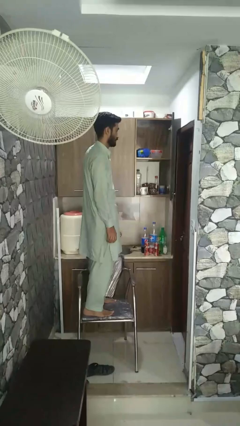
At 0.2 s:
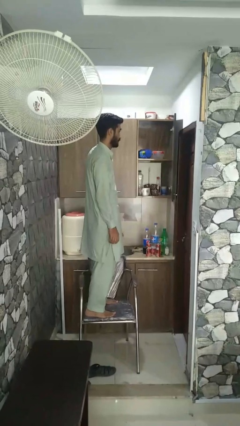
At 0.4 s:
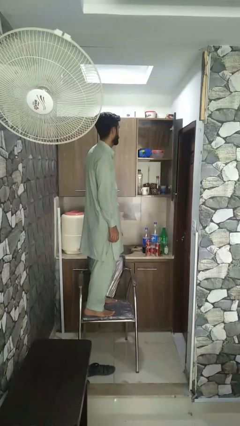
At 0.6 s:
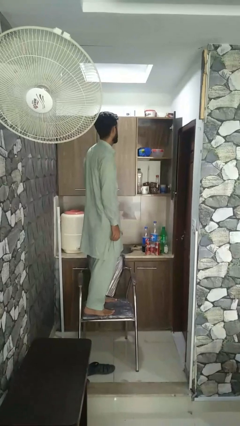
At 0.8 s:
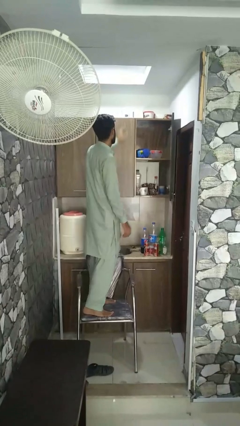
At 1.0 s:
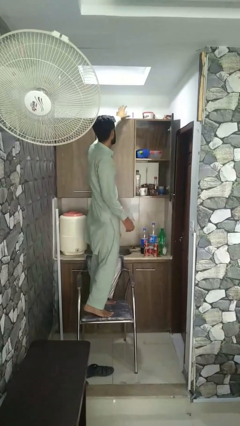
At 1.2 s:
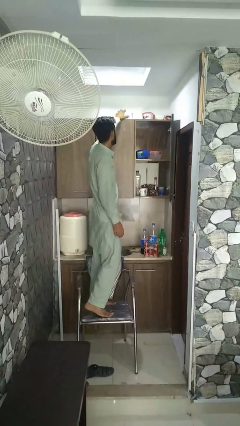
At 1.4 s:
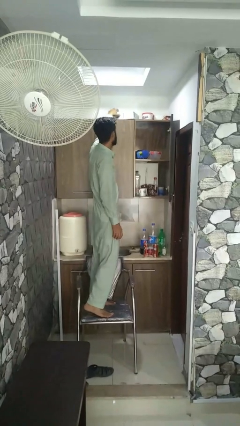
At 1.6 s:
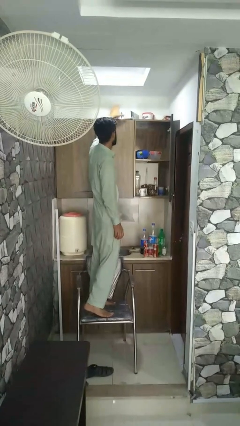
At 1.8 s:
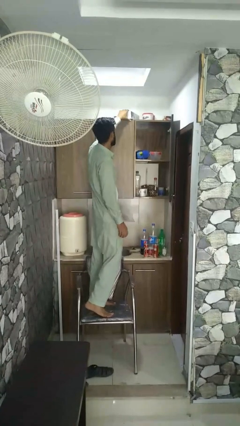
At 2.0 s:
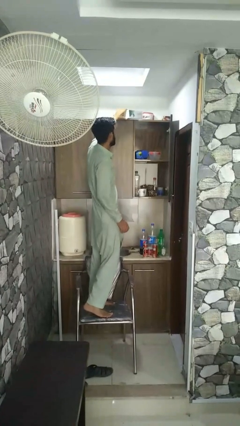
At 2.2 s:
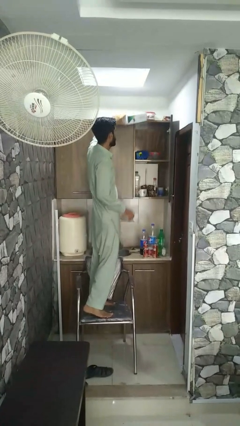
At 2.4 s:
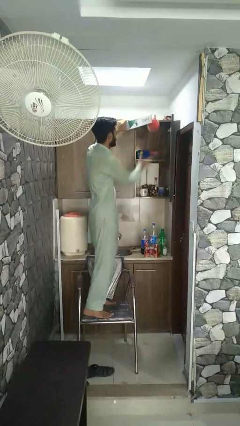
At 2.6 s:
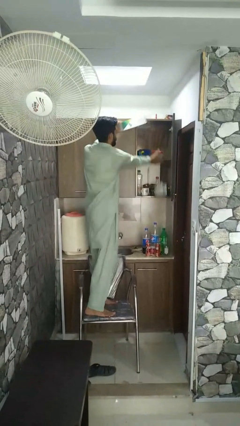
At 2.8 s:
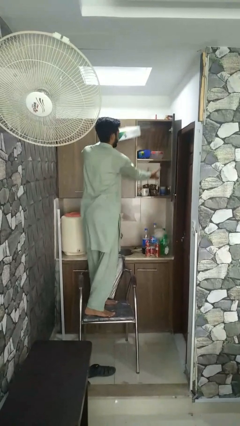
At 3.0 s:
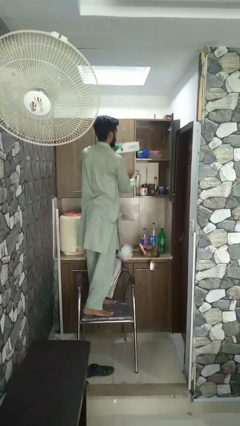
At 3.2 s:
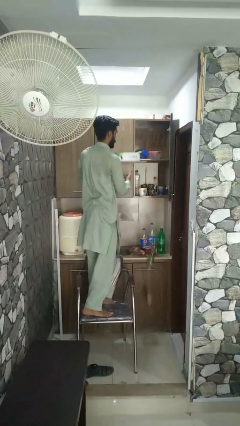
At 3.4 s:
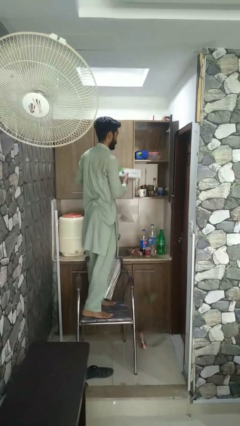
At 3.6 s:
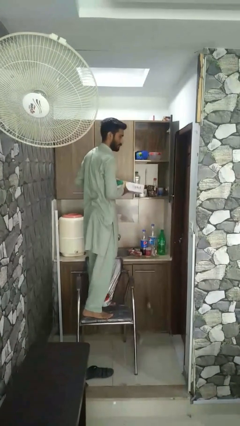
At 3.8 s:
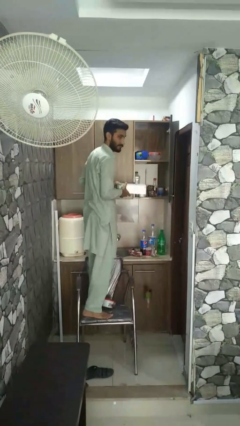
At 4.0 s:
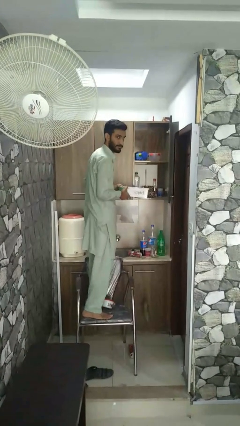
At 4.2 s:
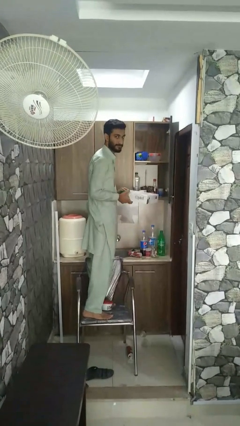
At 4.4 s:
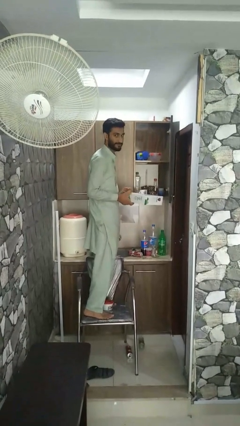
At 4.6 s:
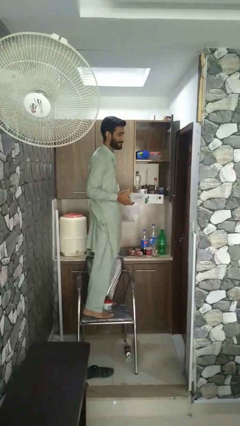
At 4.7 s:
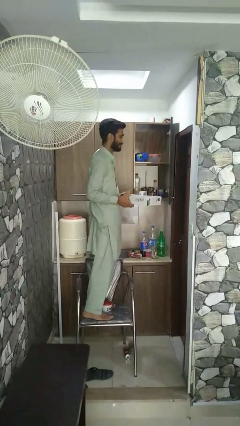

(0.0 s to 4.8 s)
person picks up object from shelf

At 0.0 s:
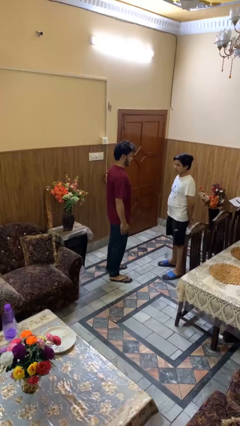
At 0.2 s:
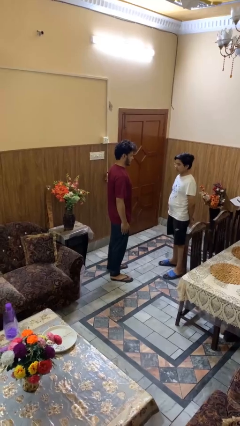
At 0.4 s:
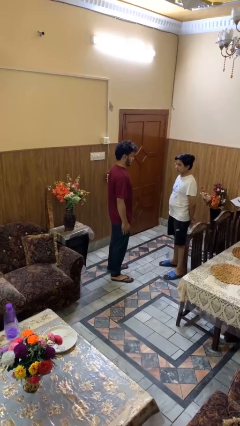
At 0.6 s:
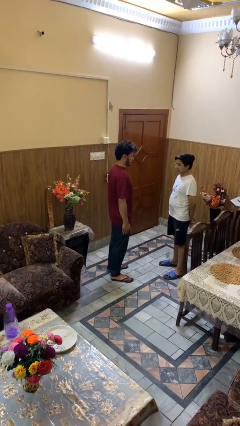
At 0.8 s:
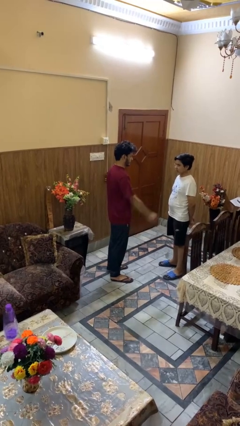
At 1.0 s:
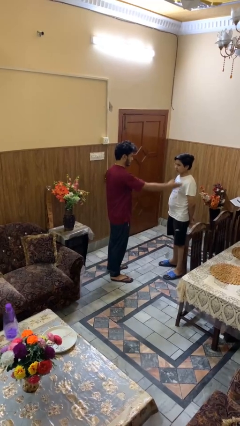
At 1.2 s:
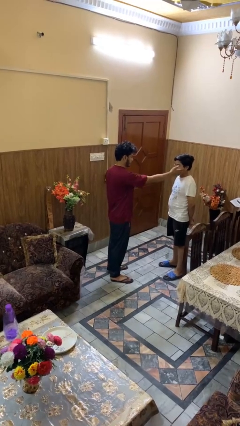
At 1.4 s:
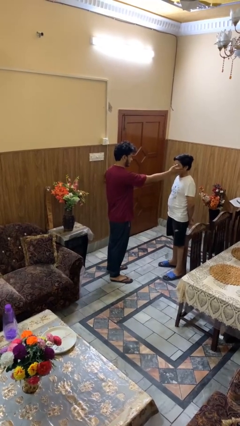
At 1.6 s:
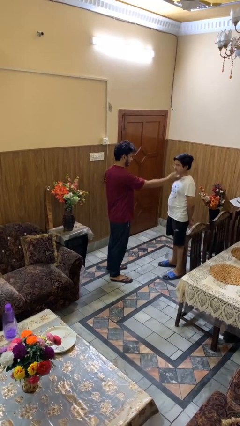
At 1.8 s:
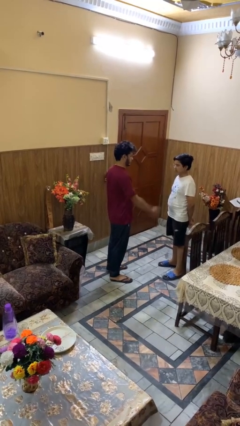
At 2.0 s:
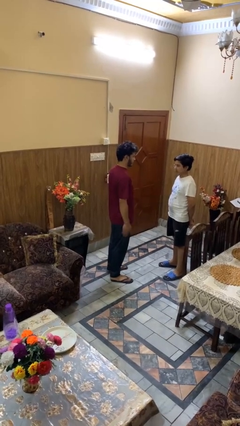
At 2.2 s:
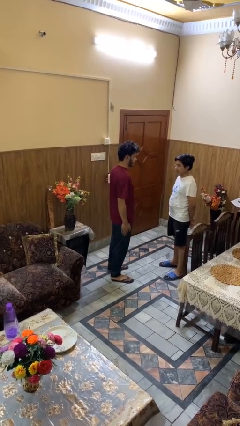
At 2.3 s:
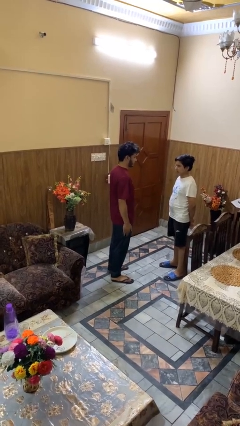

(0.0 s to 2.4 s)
person touches face of person

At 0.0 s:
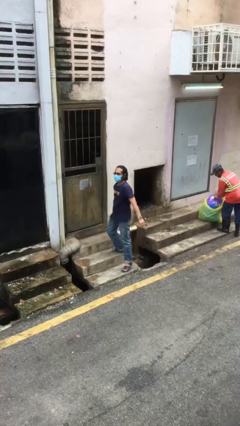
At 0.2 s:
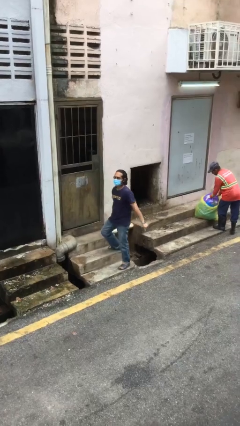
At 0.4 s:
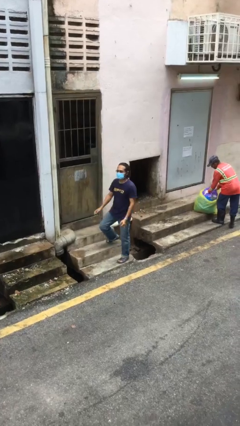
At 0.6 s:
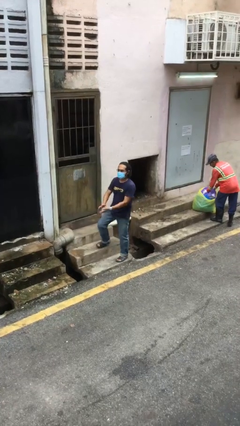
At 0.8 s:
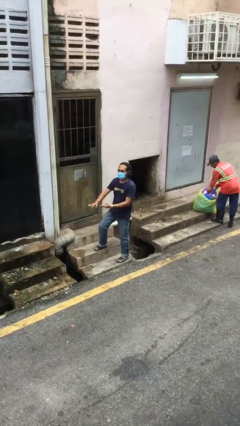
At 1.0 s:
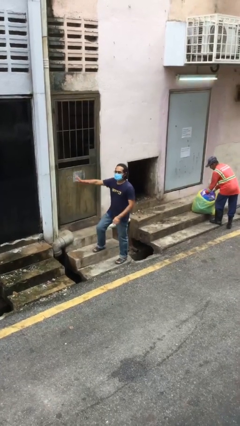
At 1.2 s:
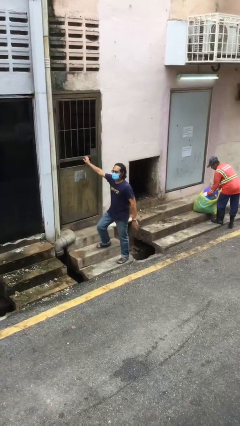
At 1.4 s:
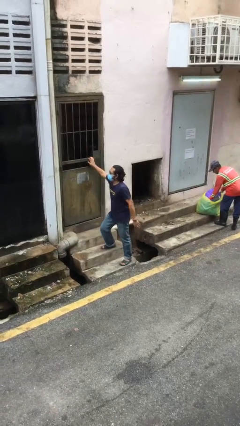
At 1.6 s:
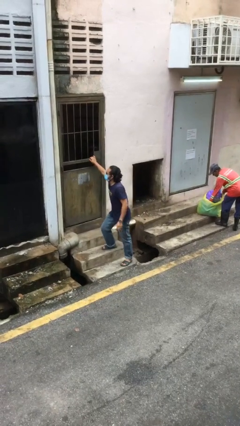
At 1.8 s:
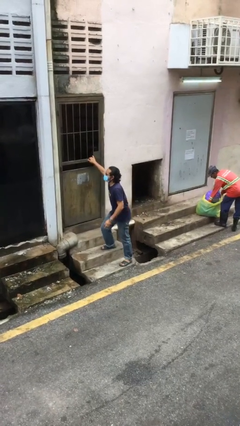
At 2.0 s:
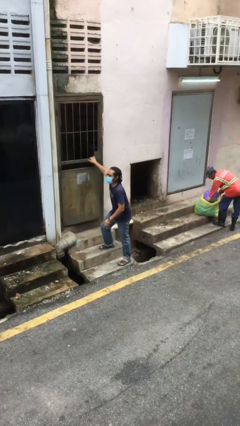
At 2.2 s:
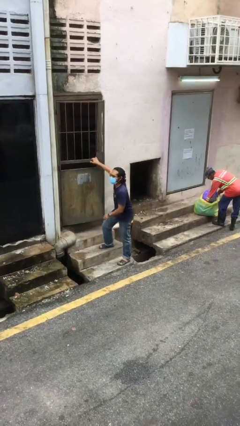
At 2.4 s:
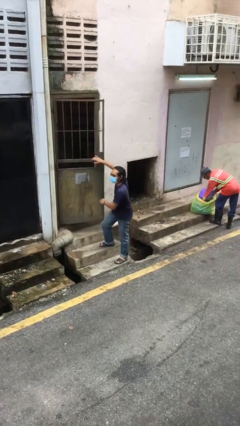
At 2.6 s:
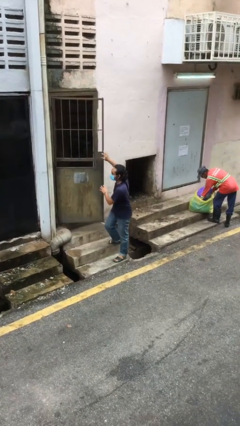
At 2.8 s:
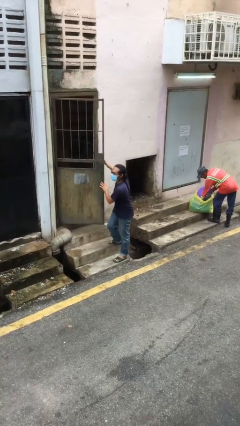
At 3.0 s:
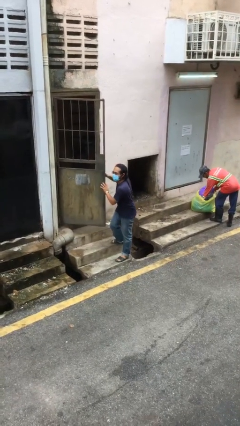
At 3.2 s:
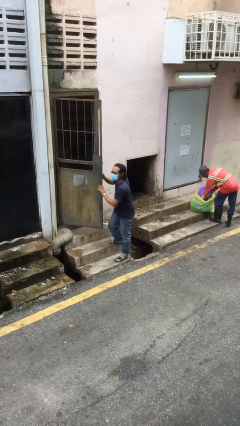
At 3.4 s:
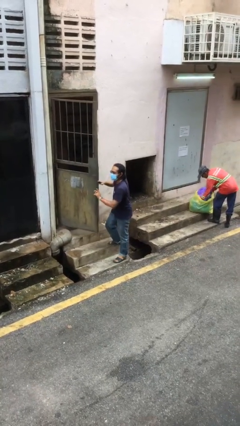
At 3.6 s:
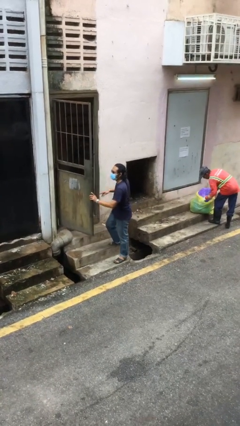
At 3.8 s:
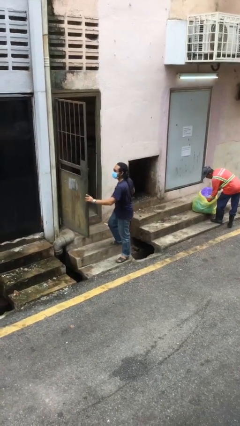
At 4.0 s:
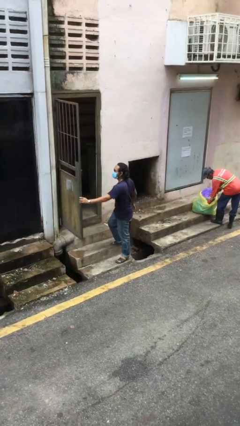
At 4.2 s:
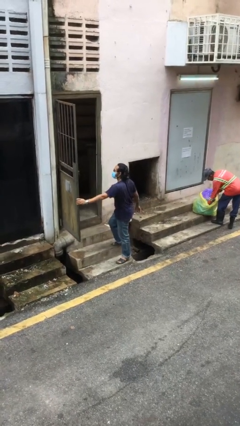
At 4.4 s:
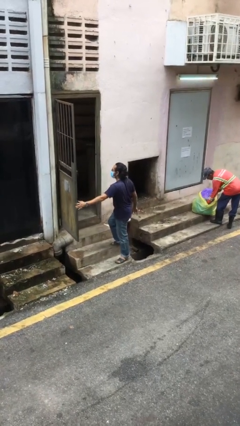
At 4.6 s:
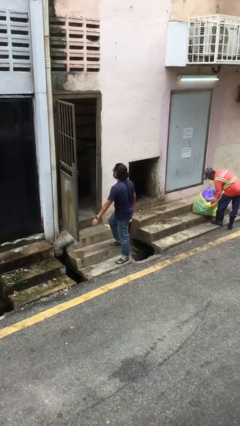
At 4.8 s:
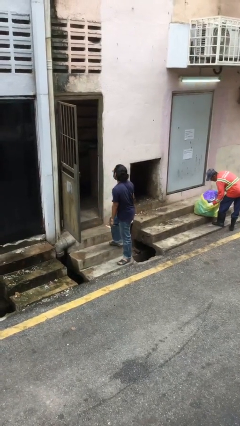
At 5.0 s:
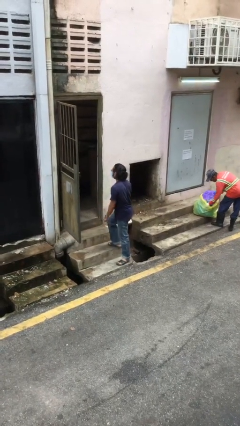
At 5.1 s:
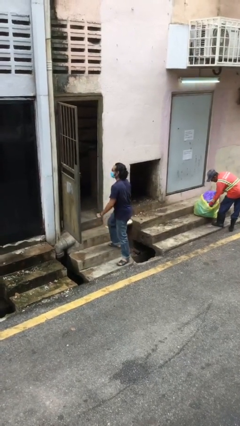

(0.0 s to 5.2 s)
person opens facility door

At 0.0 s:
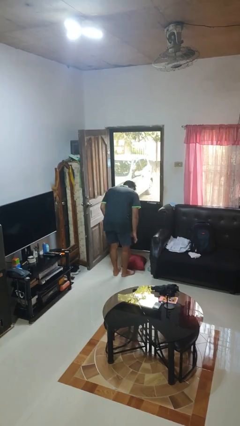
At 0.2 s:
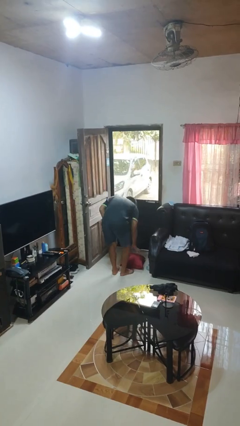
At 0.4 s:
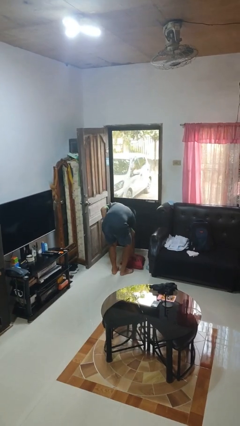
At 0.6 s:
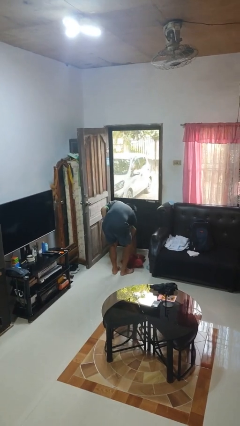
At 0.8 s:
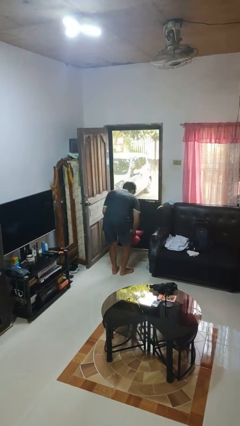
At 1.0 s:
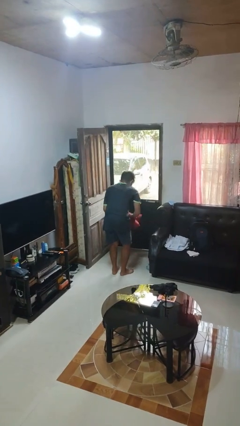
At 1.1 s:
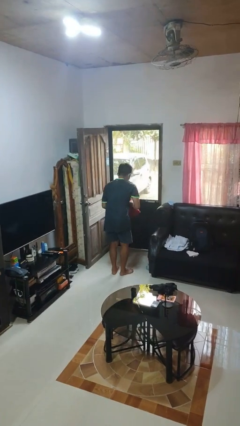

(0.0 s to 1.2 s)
person picks up object from floor

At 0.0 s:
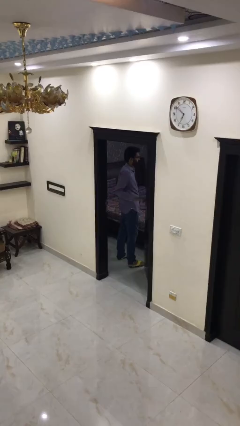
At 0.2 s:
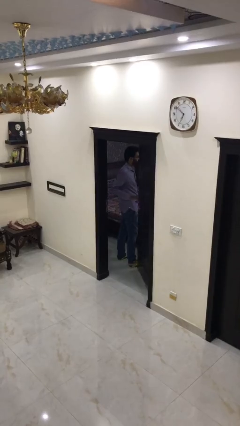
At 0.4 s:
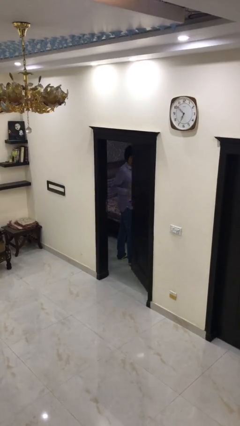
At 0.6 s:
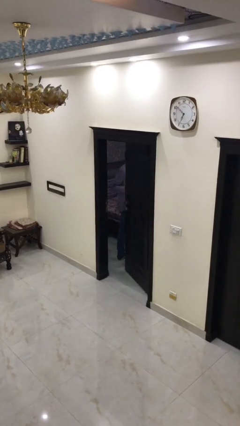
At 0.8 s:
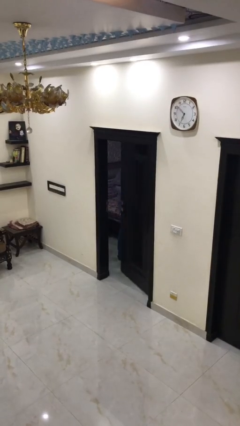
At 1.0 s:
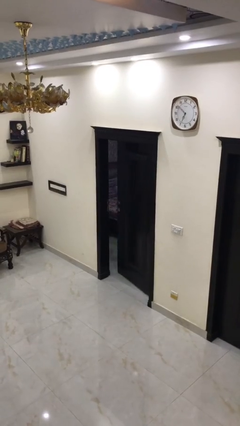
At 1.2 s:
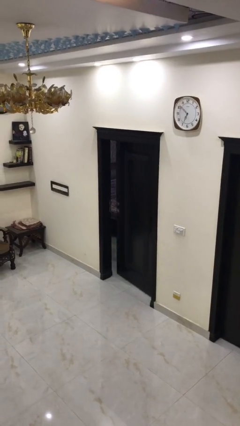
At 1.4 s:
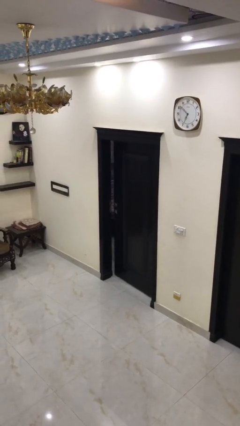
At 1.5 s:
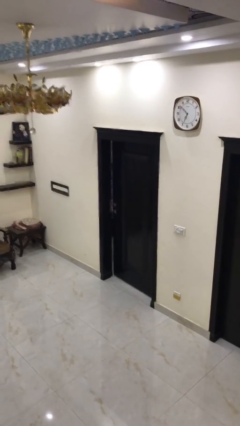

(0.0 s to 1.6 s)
person closes facility door

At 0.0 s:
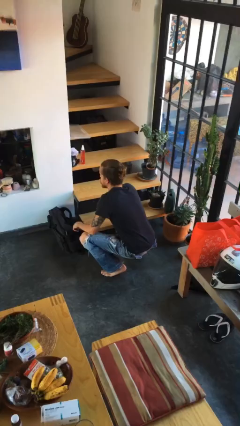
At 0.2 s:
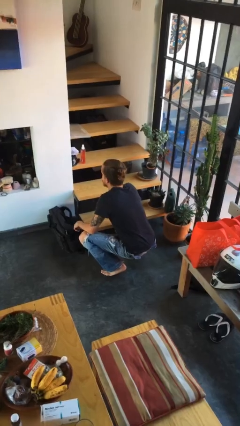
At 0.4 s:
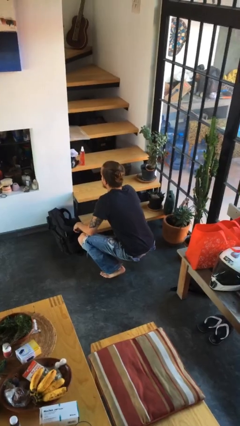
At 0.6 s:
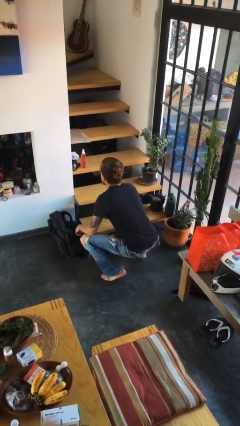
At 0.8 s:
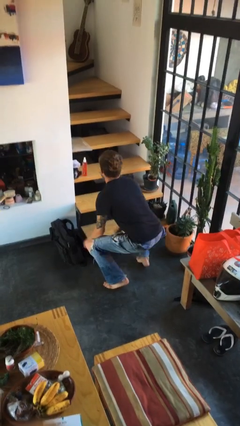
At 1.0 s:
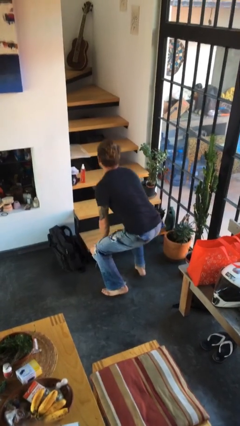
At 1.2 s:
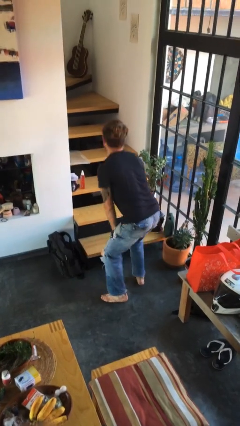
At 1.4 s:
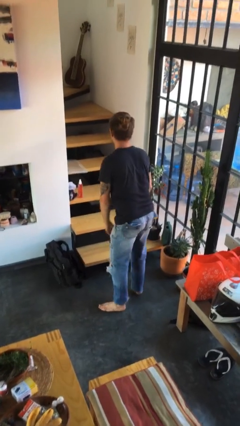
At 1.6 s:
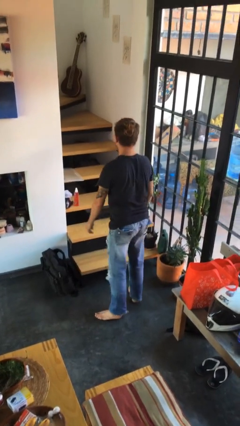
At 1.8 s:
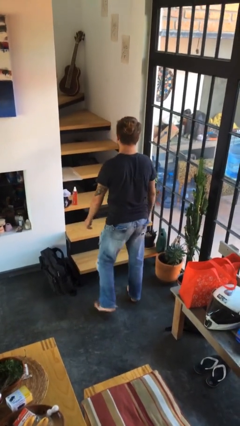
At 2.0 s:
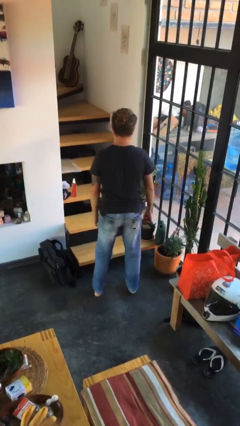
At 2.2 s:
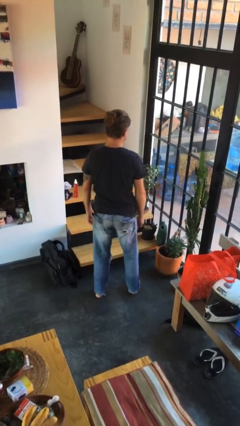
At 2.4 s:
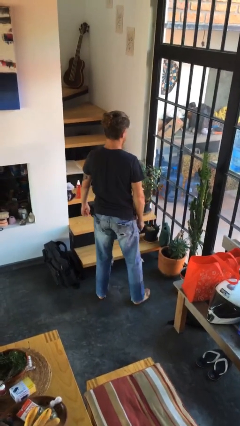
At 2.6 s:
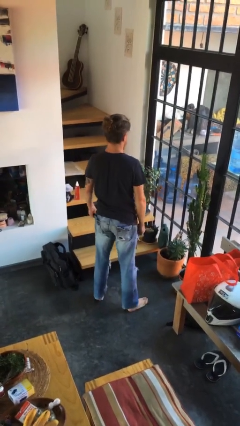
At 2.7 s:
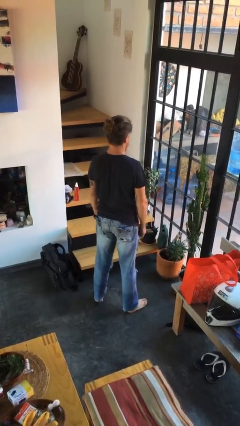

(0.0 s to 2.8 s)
person stands up
